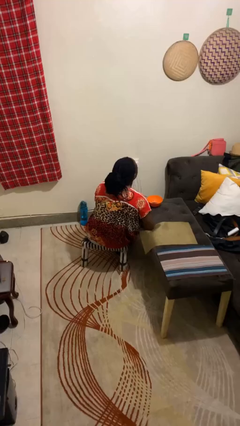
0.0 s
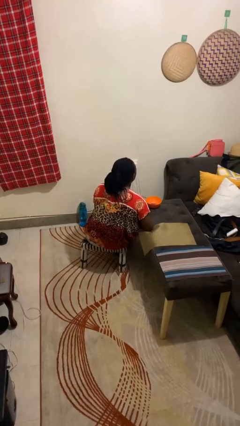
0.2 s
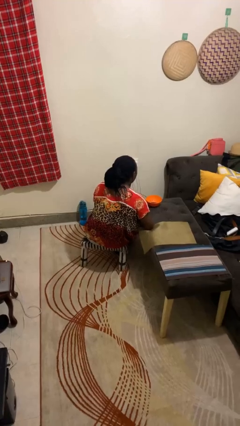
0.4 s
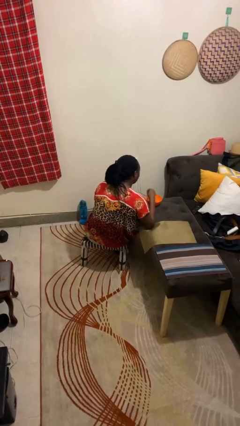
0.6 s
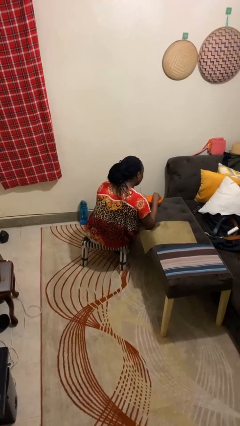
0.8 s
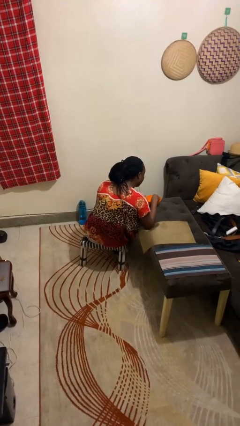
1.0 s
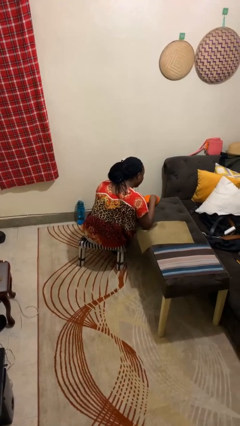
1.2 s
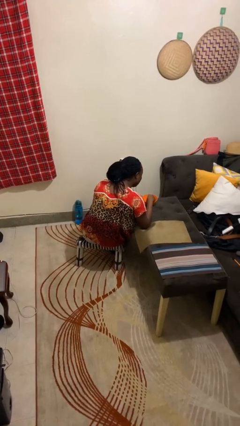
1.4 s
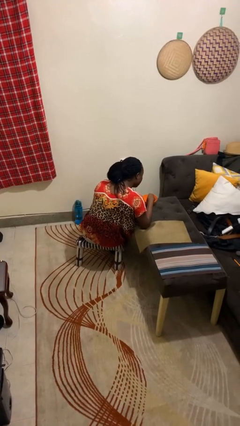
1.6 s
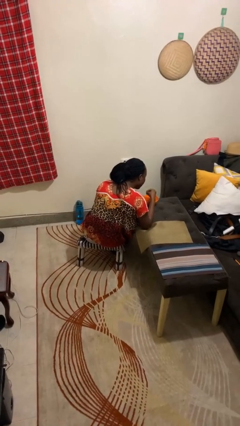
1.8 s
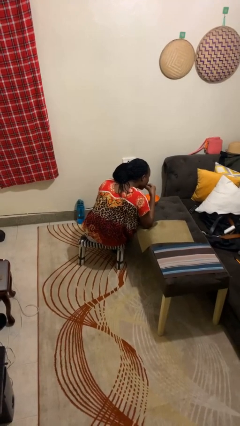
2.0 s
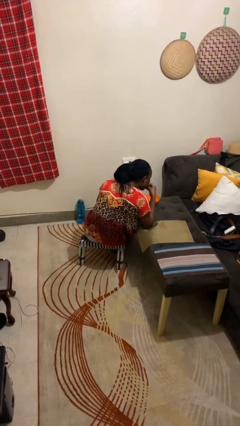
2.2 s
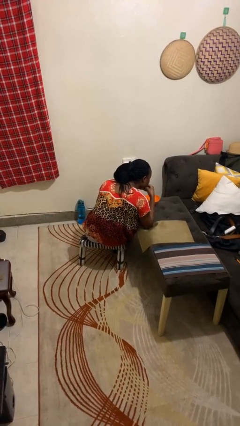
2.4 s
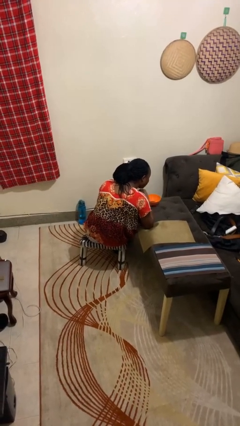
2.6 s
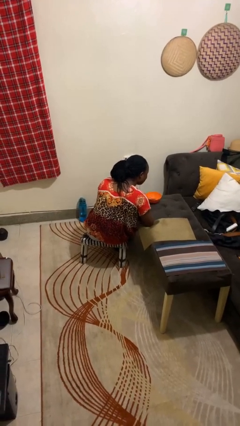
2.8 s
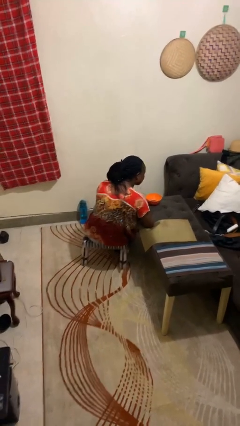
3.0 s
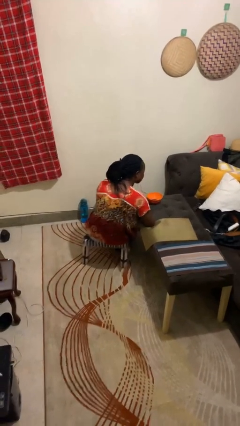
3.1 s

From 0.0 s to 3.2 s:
person eats with hands

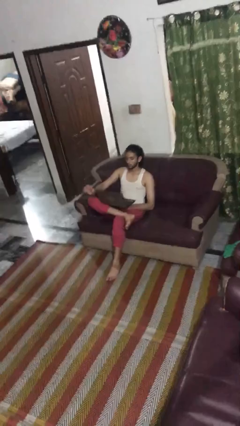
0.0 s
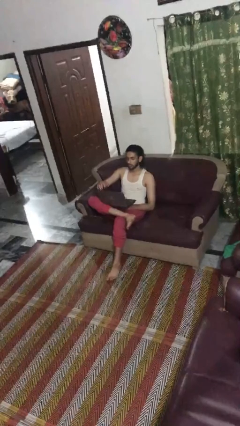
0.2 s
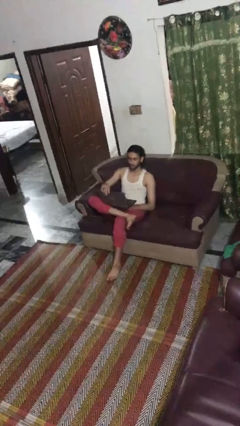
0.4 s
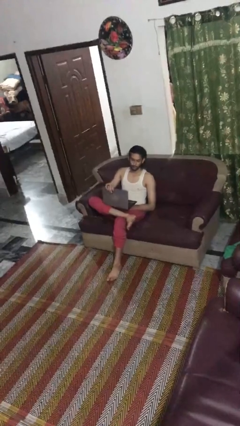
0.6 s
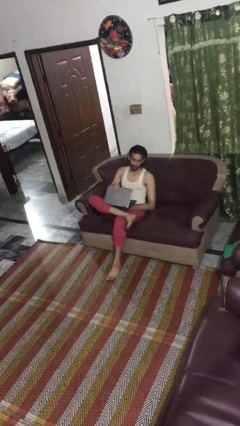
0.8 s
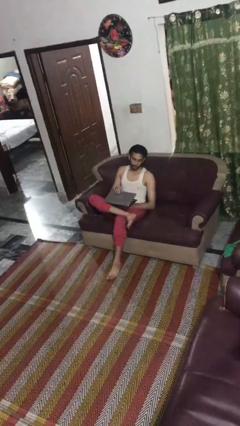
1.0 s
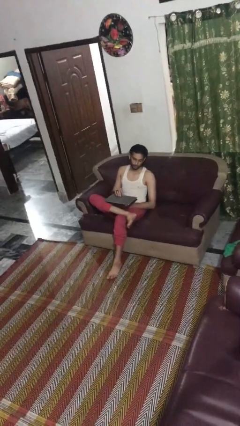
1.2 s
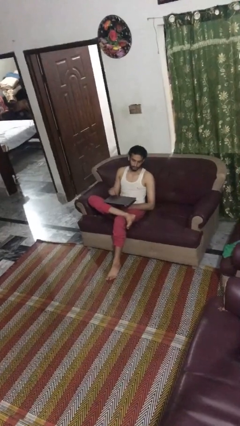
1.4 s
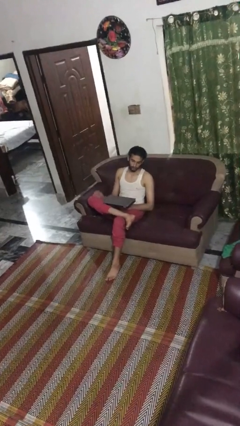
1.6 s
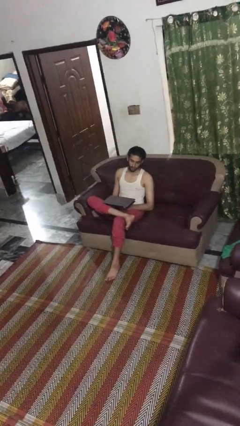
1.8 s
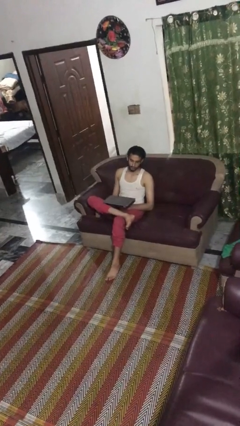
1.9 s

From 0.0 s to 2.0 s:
person closes laptop

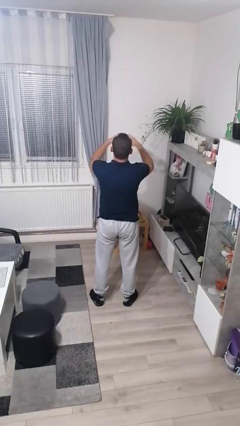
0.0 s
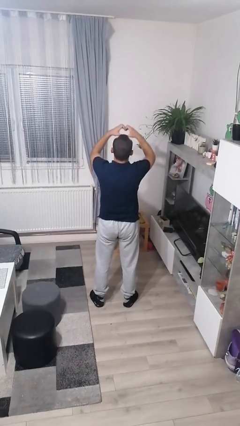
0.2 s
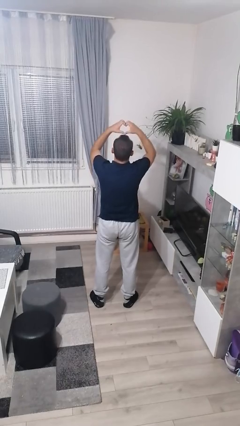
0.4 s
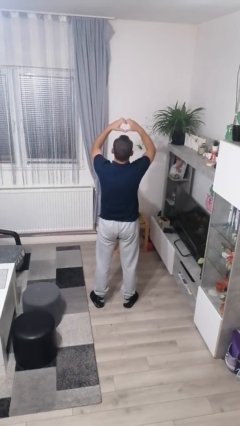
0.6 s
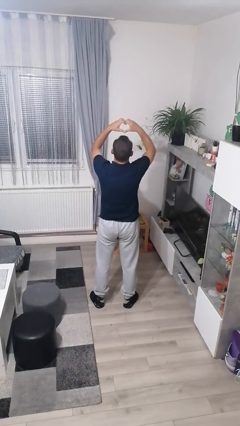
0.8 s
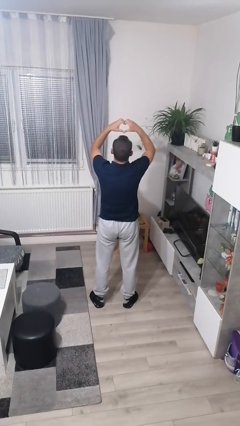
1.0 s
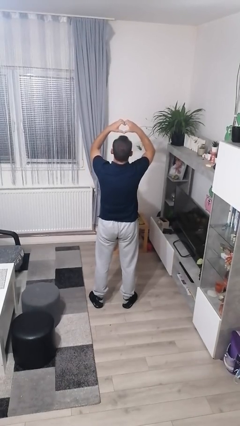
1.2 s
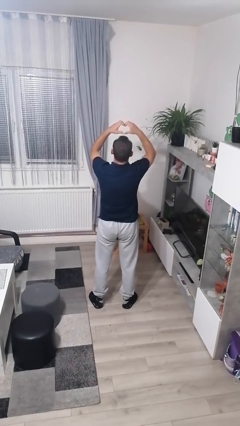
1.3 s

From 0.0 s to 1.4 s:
person gestures heart

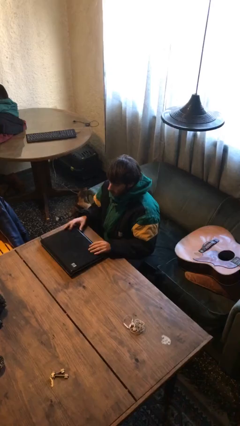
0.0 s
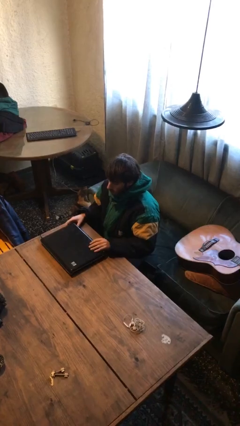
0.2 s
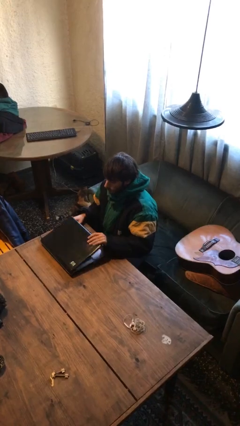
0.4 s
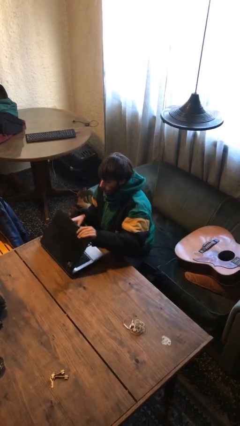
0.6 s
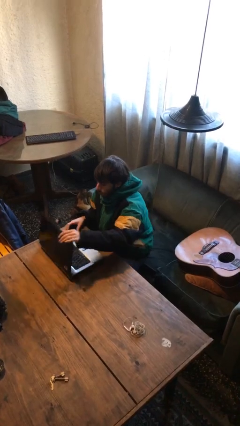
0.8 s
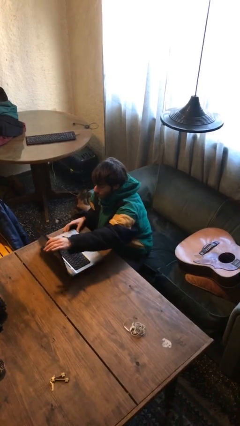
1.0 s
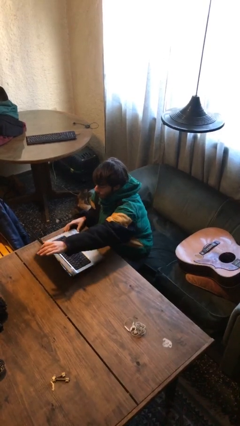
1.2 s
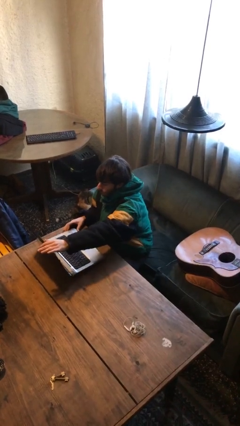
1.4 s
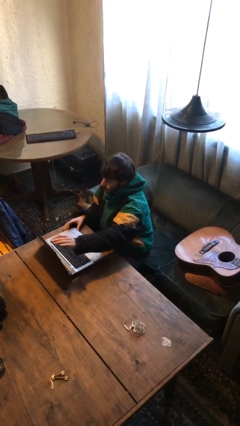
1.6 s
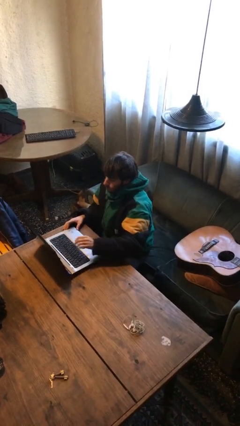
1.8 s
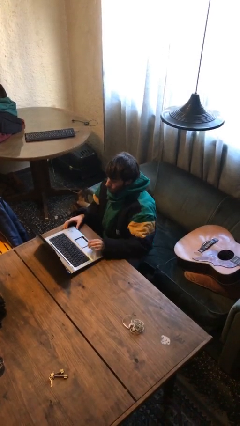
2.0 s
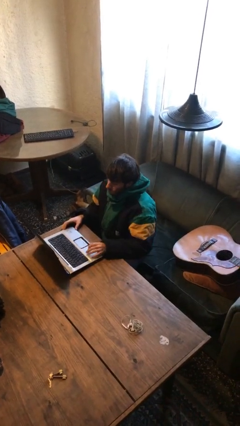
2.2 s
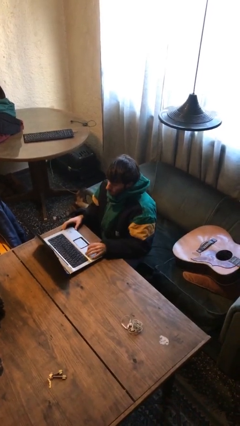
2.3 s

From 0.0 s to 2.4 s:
person opens laptop

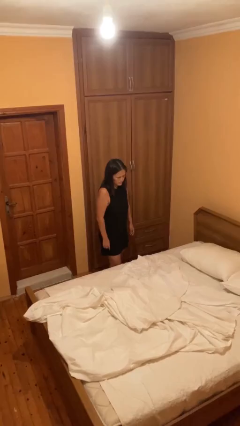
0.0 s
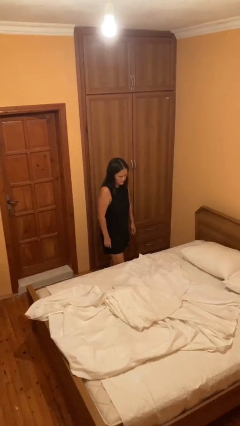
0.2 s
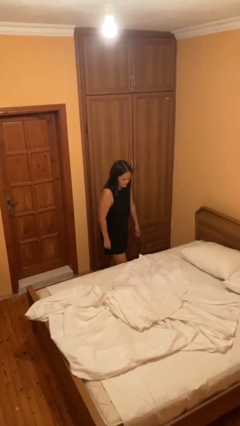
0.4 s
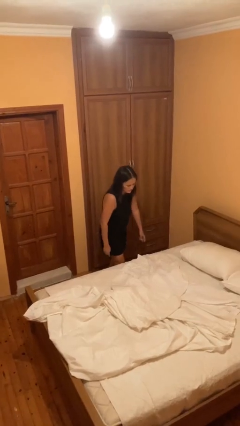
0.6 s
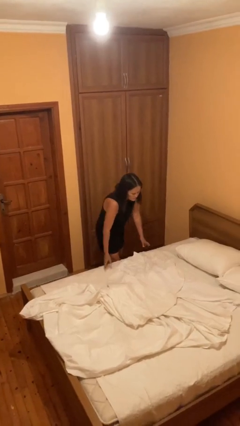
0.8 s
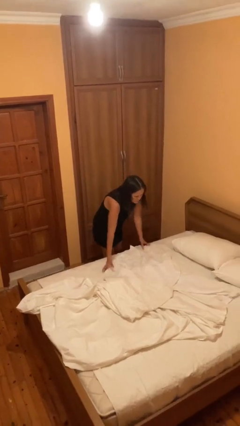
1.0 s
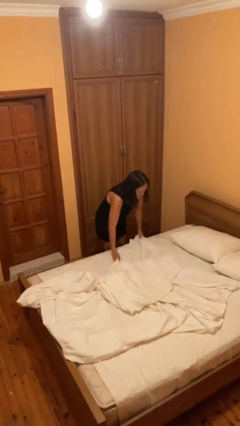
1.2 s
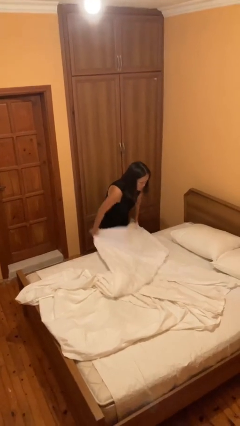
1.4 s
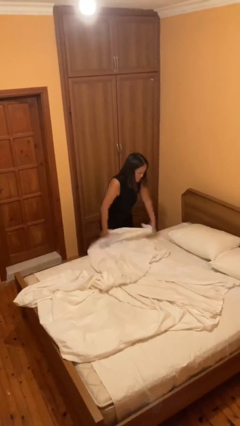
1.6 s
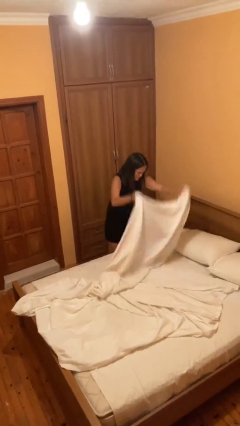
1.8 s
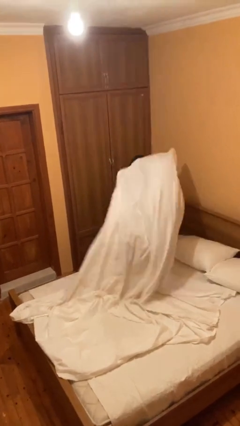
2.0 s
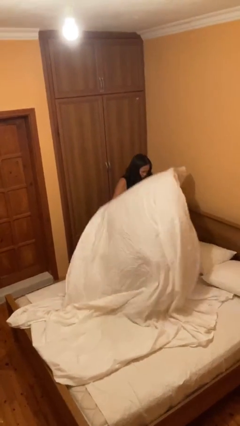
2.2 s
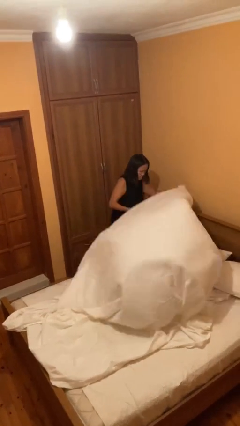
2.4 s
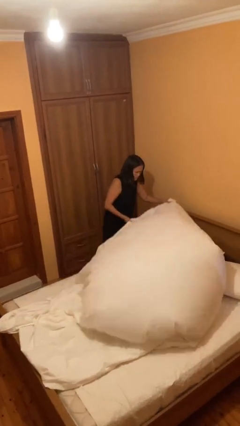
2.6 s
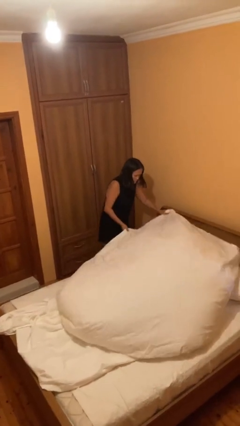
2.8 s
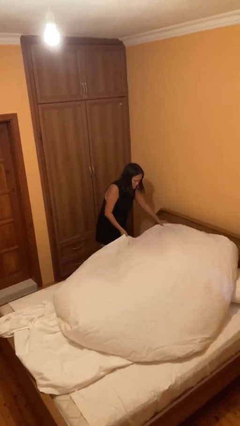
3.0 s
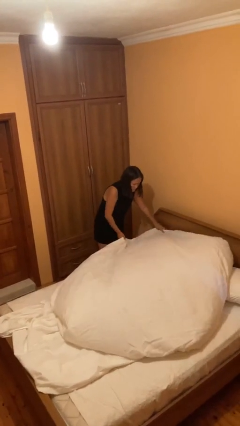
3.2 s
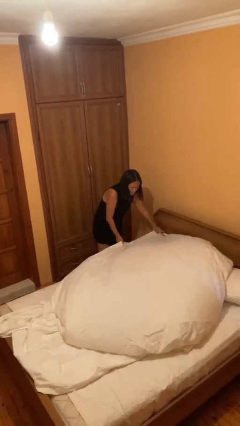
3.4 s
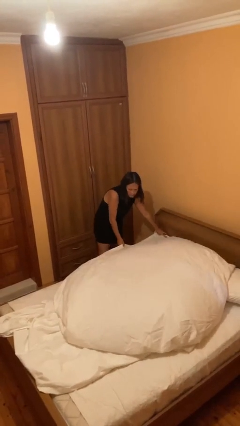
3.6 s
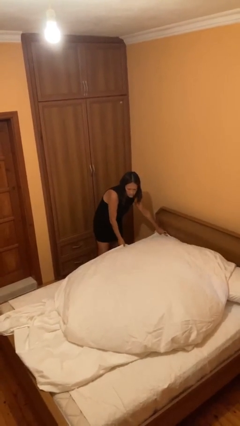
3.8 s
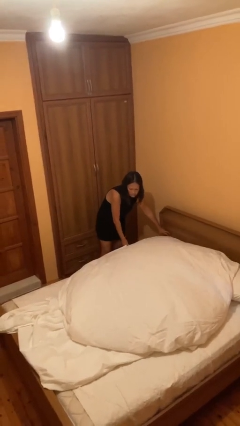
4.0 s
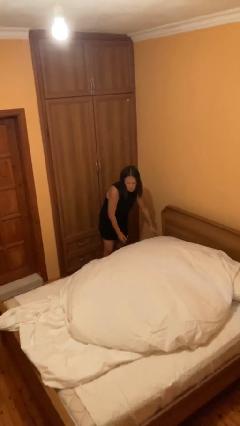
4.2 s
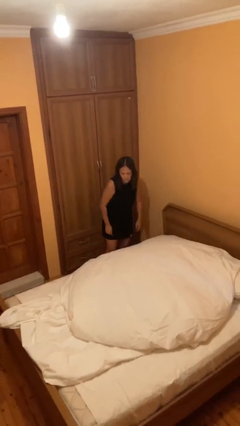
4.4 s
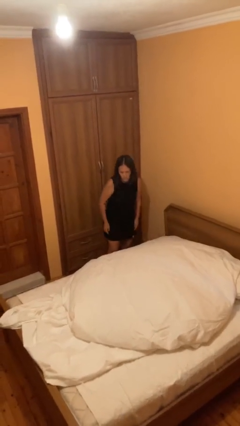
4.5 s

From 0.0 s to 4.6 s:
person makes bed

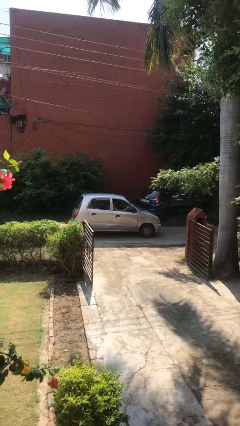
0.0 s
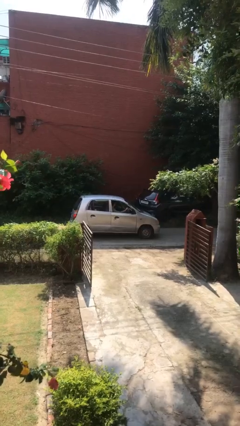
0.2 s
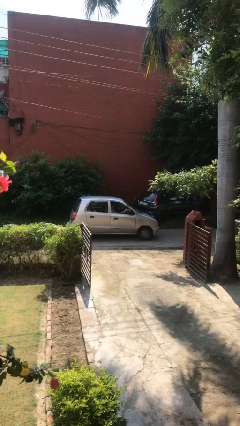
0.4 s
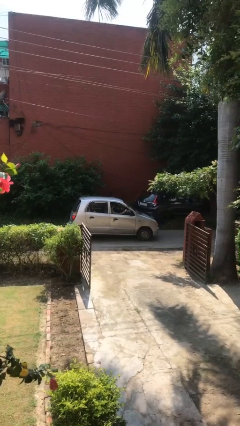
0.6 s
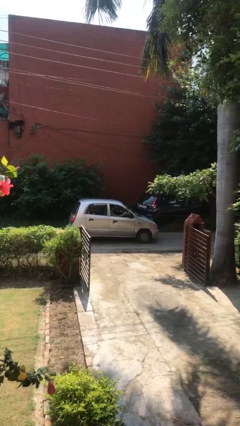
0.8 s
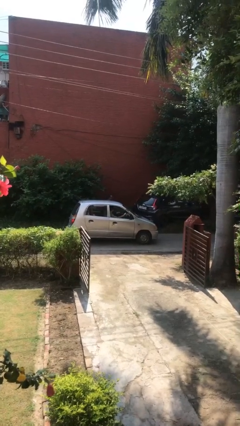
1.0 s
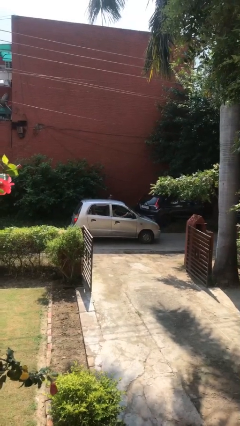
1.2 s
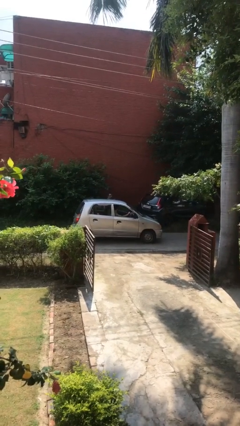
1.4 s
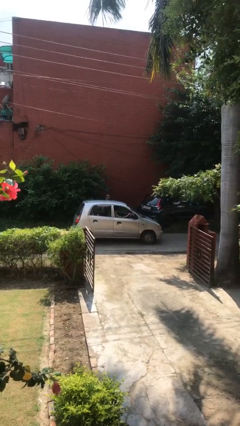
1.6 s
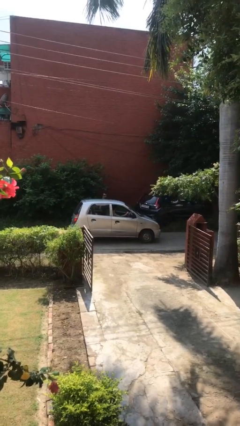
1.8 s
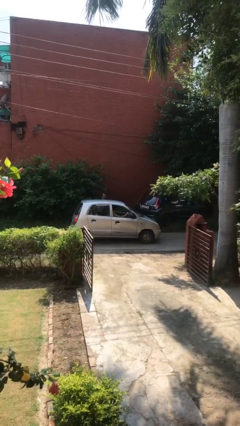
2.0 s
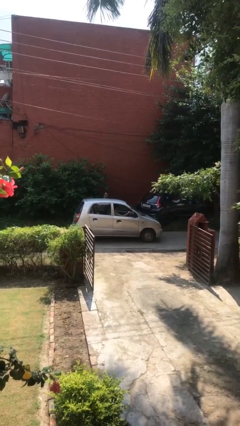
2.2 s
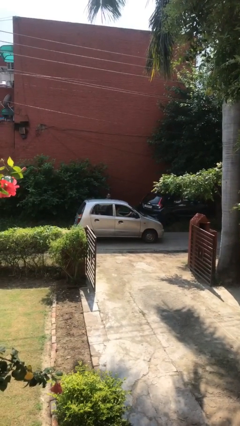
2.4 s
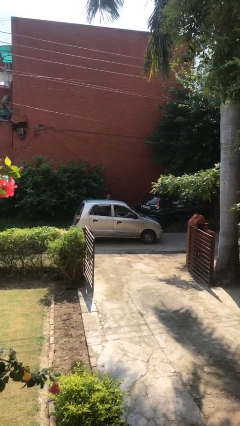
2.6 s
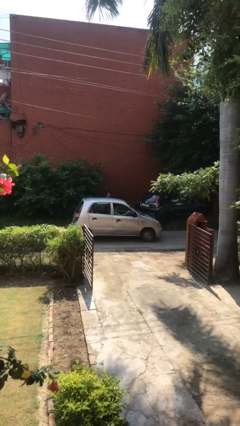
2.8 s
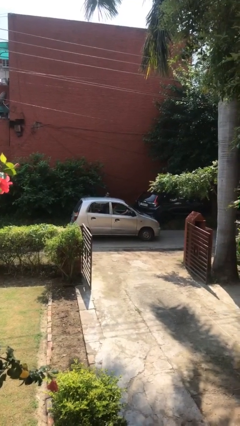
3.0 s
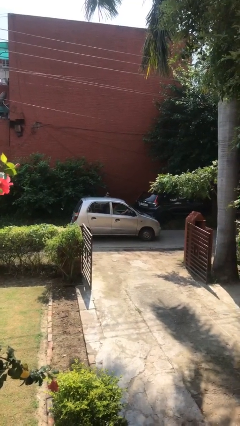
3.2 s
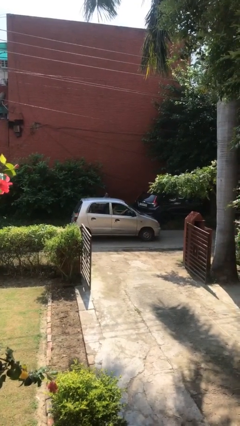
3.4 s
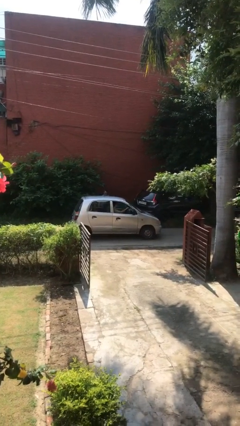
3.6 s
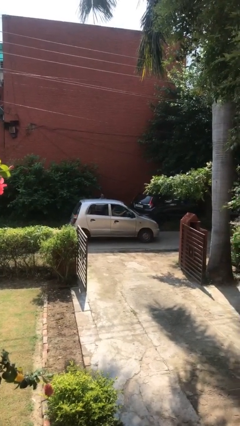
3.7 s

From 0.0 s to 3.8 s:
car drops off person
